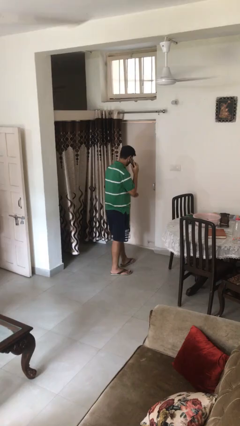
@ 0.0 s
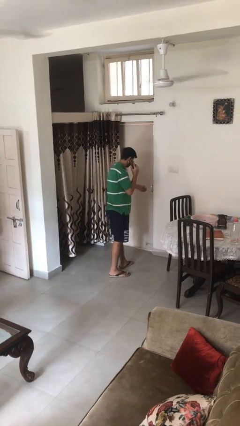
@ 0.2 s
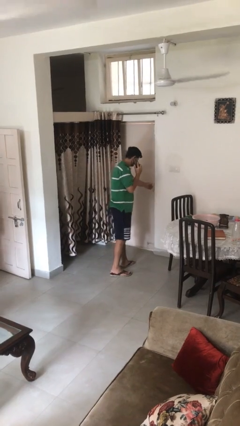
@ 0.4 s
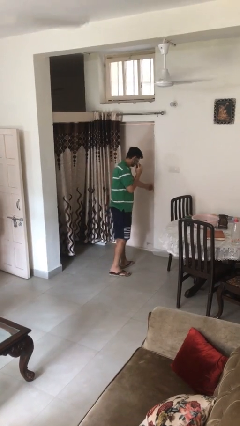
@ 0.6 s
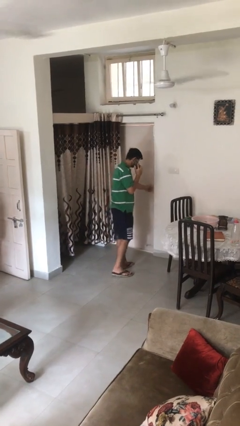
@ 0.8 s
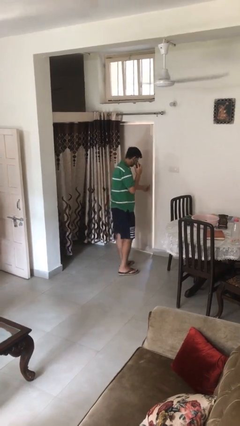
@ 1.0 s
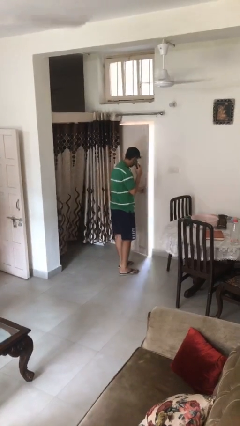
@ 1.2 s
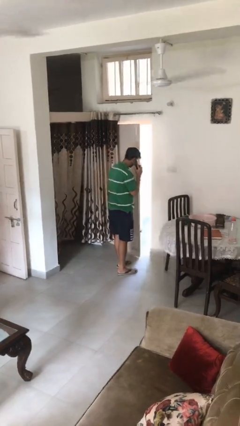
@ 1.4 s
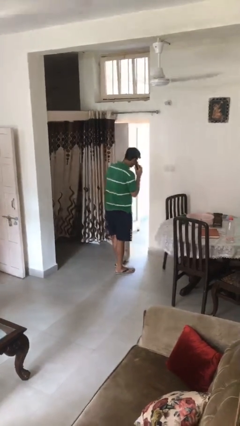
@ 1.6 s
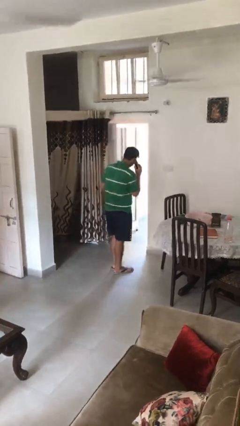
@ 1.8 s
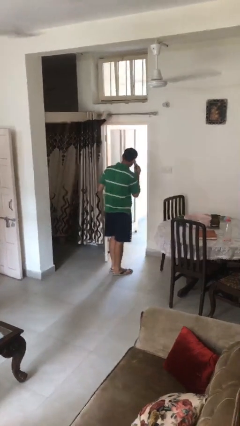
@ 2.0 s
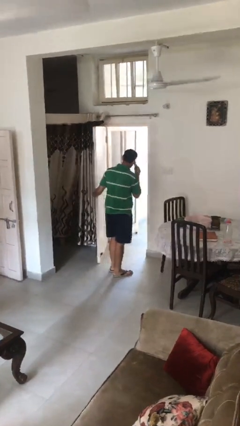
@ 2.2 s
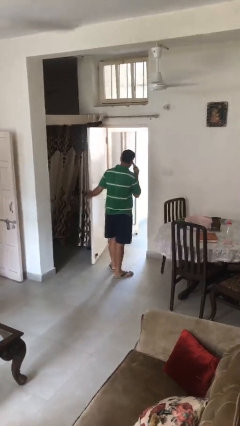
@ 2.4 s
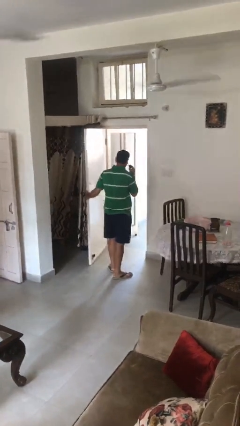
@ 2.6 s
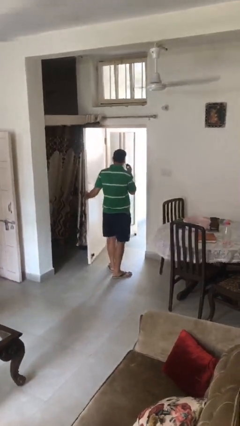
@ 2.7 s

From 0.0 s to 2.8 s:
person opens facility door

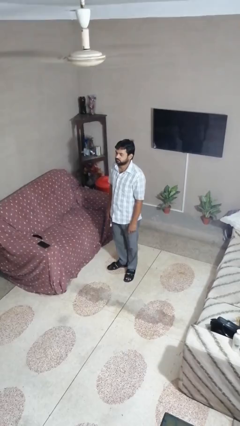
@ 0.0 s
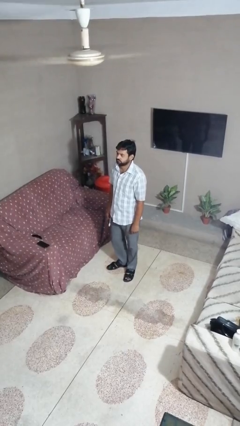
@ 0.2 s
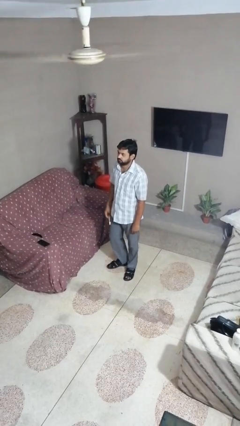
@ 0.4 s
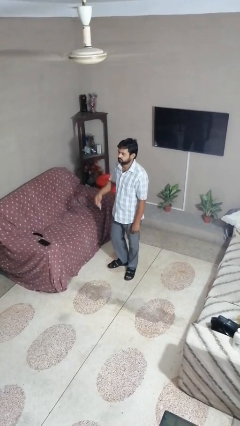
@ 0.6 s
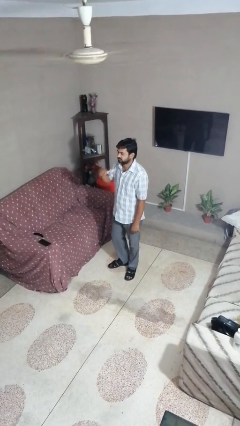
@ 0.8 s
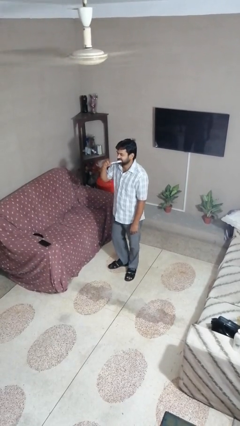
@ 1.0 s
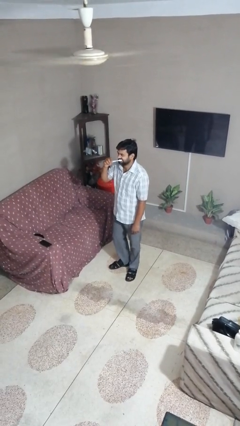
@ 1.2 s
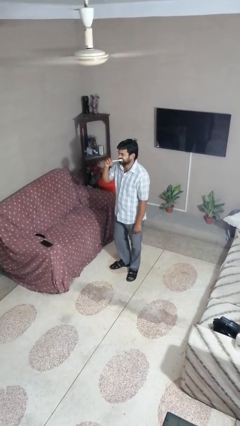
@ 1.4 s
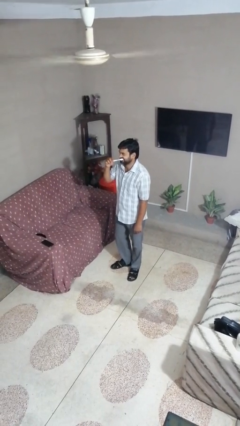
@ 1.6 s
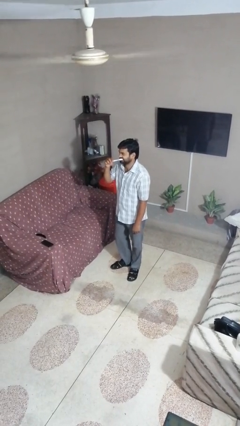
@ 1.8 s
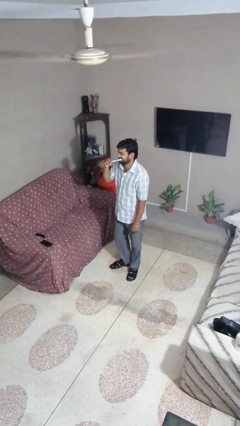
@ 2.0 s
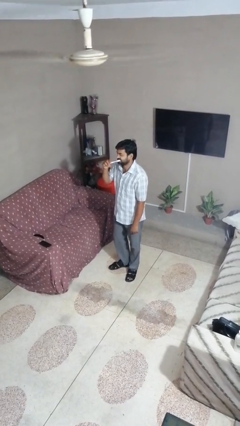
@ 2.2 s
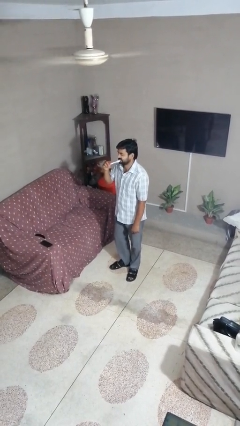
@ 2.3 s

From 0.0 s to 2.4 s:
person brushes teeth

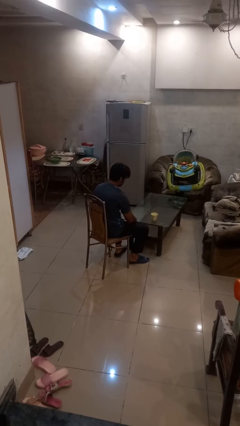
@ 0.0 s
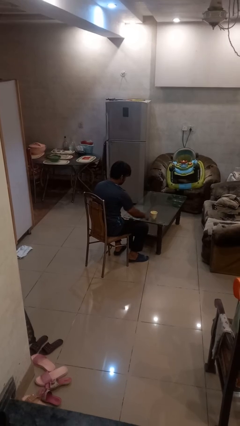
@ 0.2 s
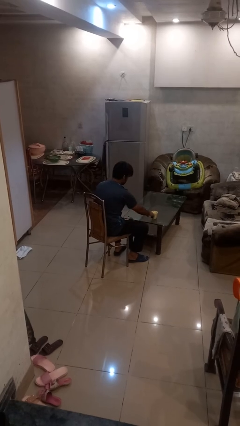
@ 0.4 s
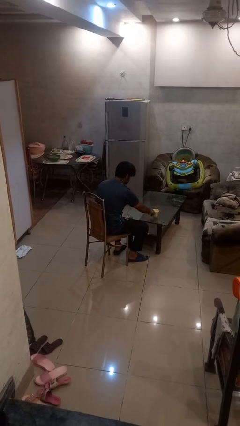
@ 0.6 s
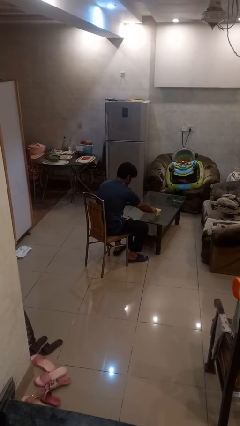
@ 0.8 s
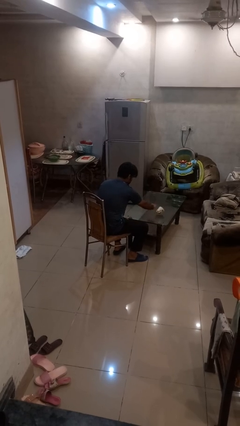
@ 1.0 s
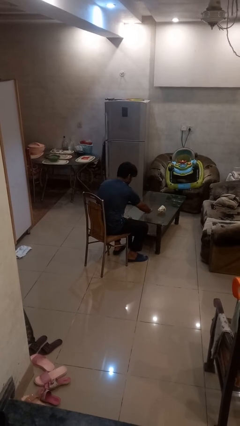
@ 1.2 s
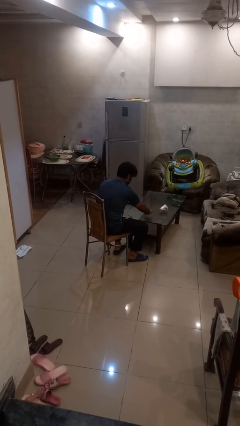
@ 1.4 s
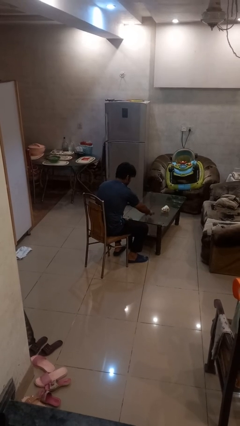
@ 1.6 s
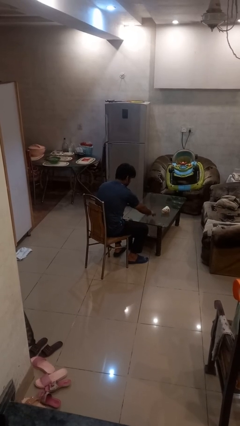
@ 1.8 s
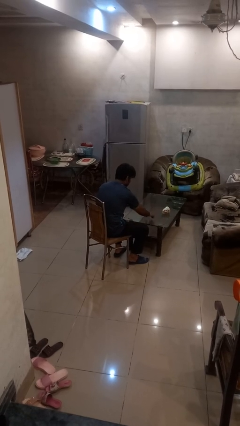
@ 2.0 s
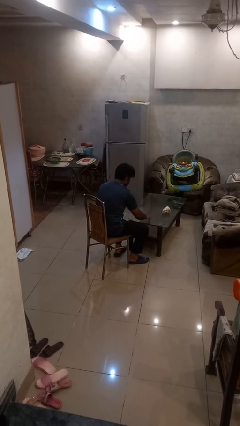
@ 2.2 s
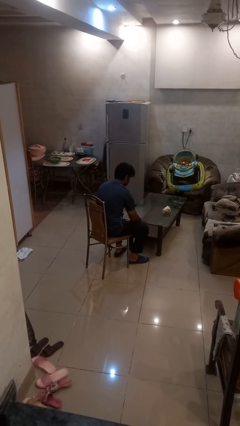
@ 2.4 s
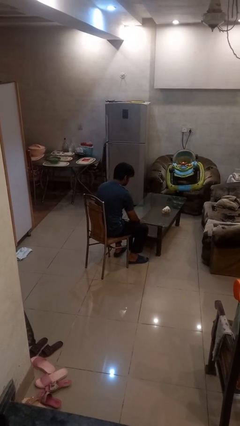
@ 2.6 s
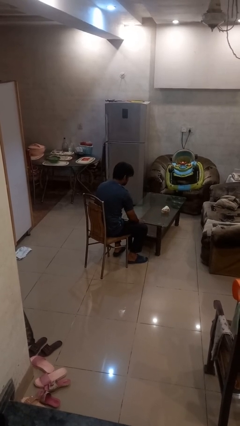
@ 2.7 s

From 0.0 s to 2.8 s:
person knocks over glass

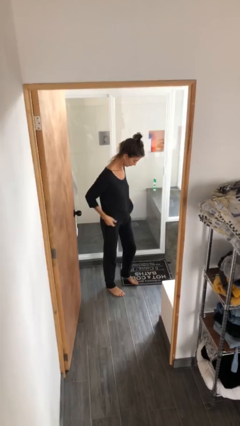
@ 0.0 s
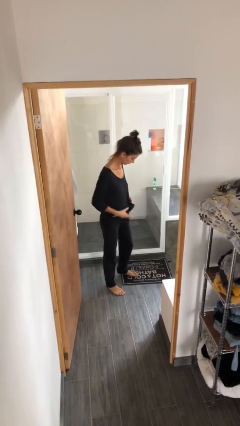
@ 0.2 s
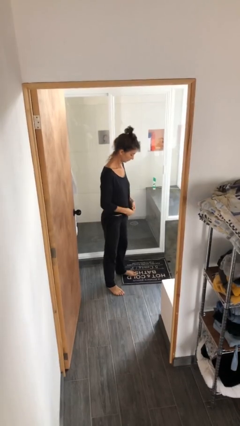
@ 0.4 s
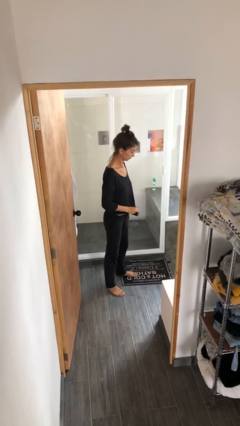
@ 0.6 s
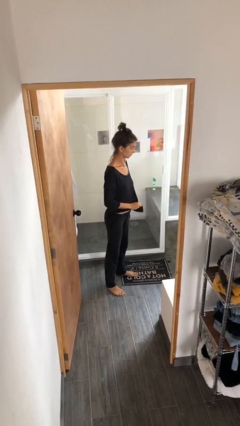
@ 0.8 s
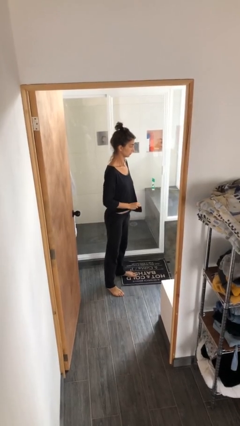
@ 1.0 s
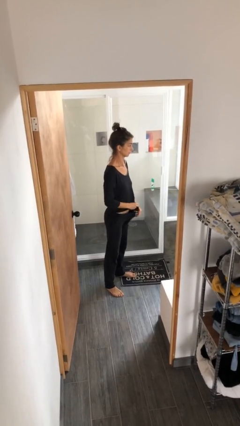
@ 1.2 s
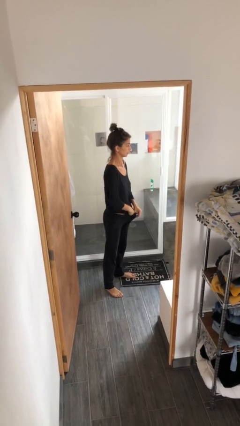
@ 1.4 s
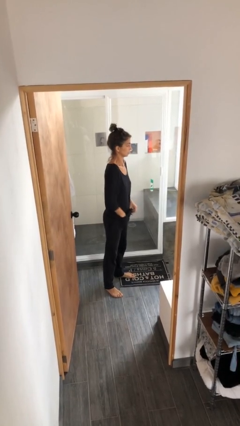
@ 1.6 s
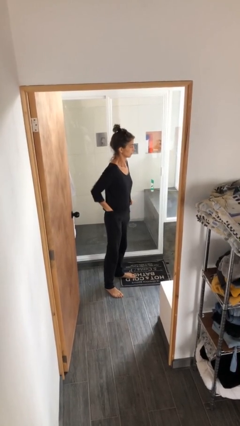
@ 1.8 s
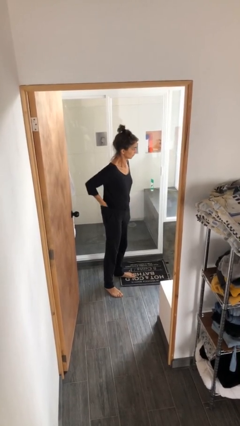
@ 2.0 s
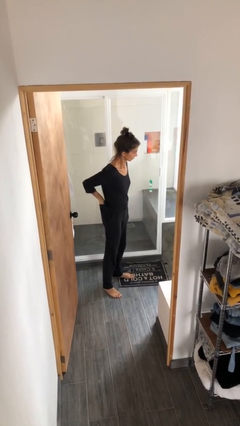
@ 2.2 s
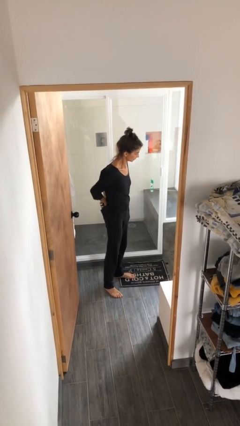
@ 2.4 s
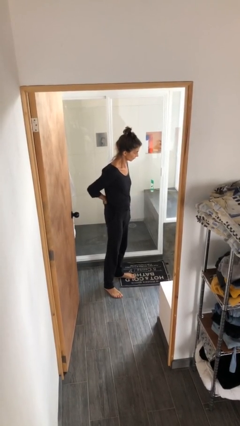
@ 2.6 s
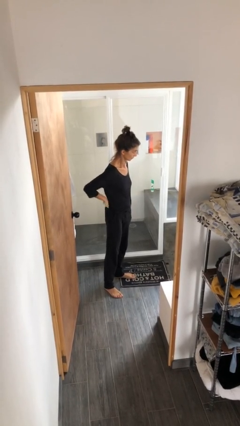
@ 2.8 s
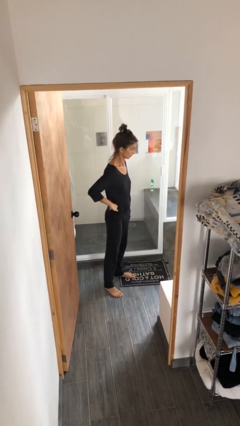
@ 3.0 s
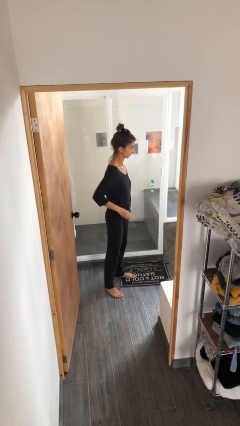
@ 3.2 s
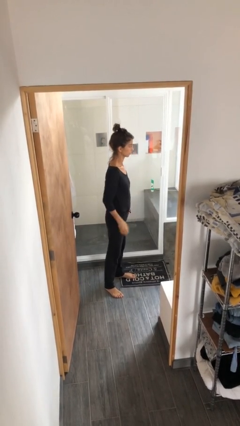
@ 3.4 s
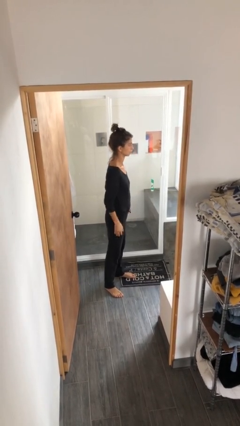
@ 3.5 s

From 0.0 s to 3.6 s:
person tucks in shirt

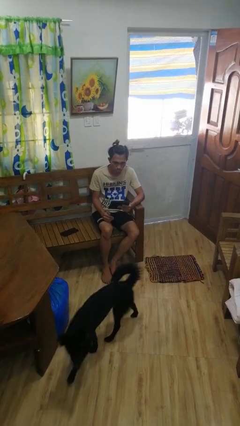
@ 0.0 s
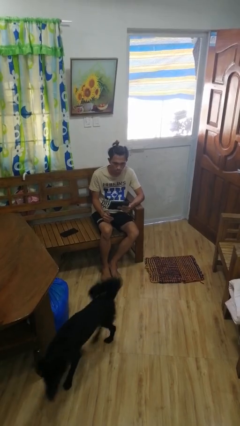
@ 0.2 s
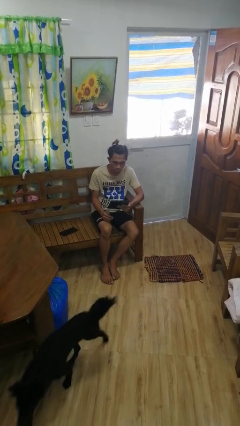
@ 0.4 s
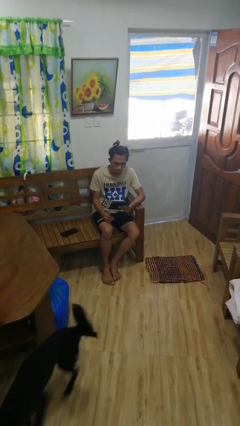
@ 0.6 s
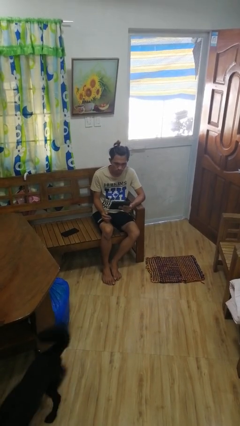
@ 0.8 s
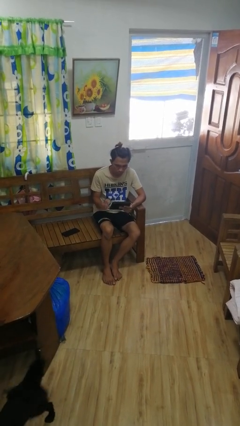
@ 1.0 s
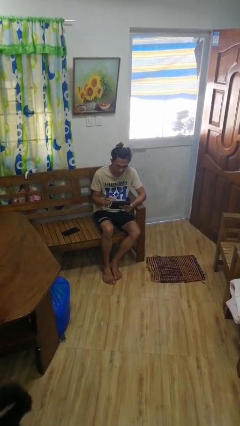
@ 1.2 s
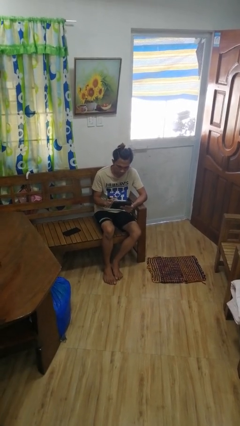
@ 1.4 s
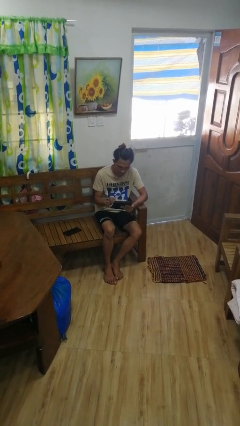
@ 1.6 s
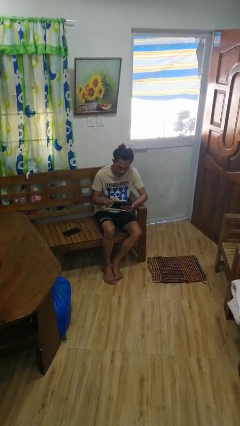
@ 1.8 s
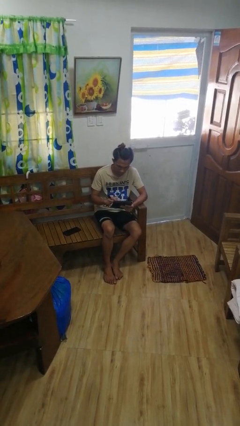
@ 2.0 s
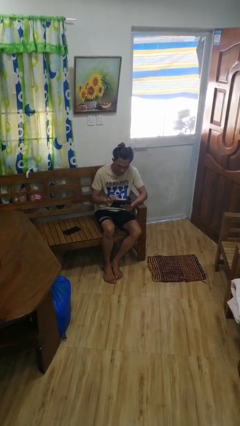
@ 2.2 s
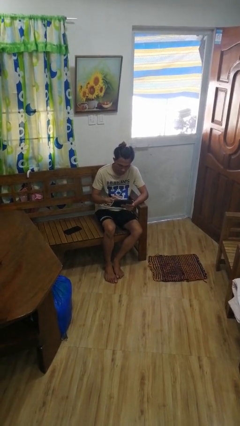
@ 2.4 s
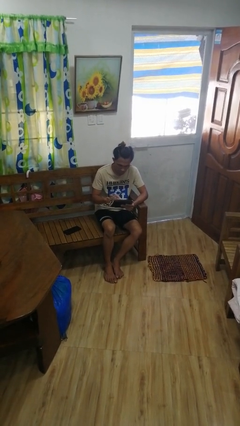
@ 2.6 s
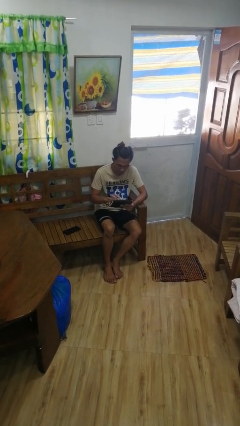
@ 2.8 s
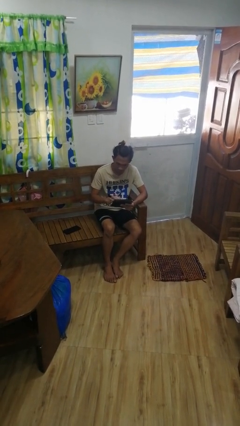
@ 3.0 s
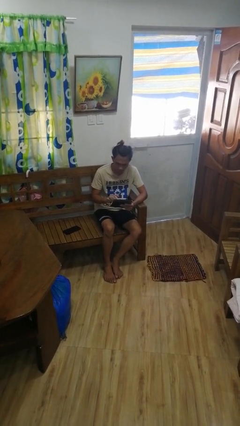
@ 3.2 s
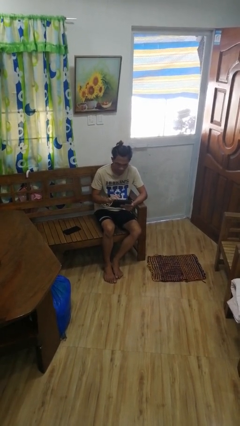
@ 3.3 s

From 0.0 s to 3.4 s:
person interacts with tablet

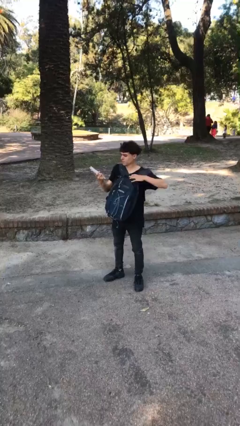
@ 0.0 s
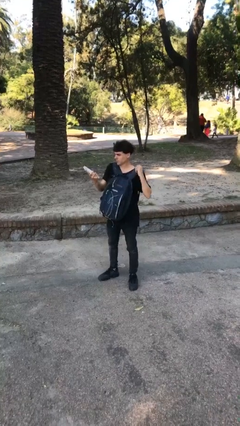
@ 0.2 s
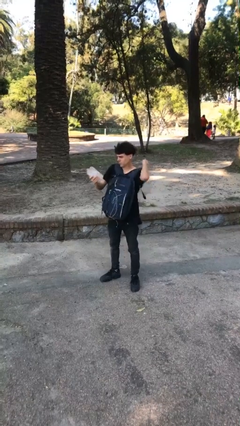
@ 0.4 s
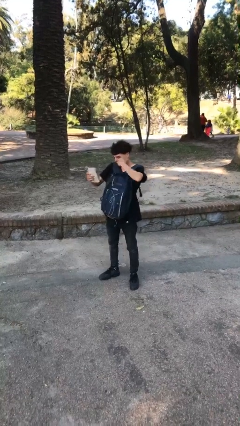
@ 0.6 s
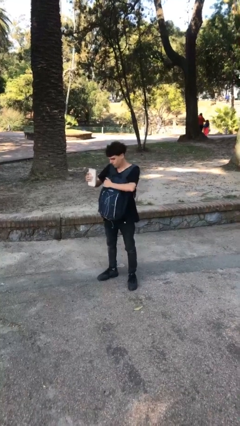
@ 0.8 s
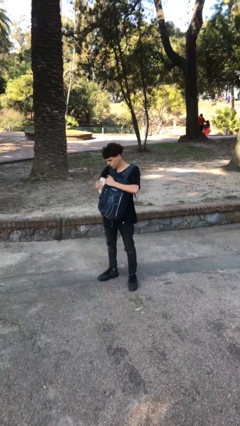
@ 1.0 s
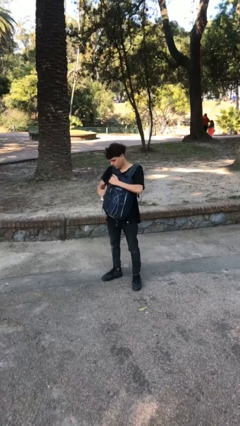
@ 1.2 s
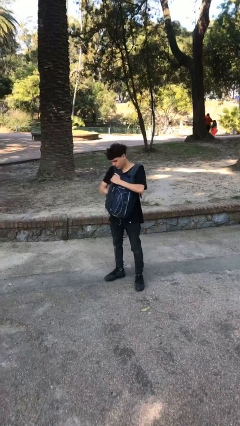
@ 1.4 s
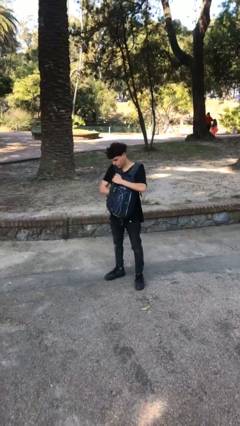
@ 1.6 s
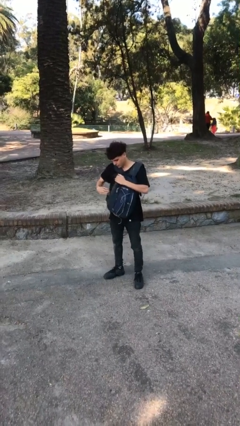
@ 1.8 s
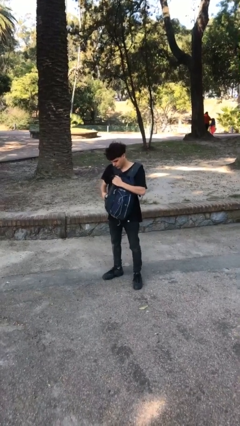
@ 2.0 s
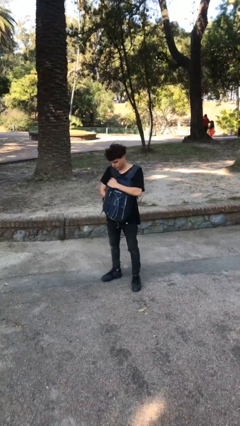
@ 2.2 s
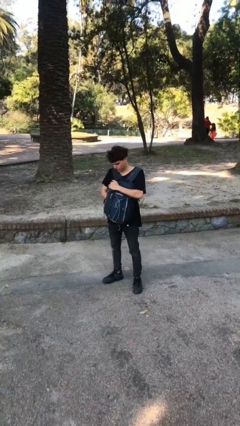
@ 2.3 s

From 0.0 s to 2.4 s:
person puts object into backpack
